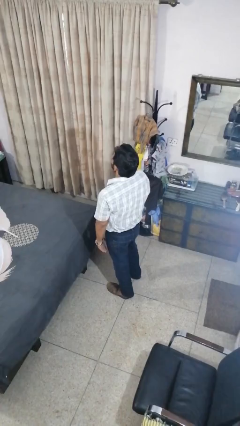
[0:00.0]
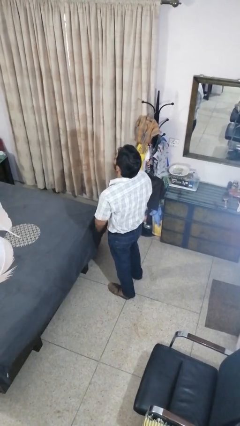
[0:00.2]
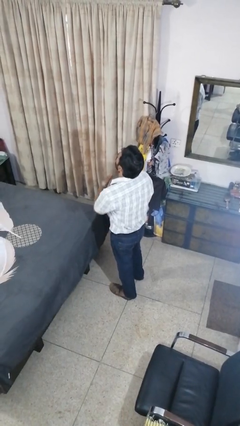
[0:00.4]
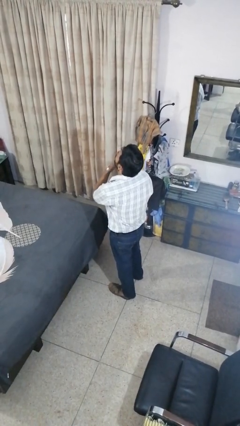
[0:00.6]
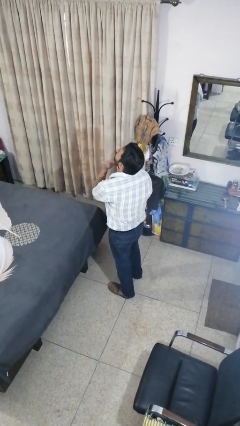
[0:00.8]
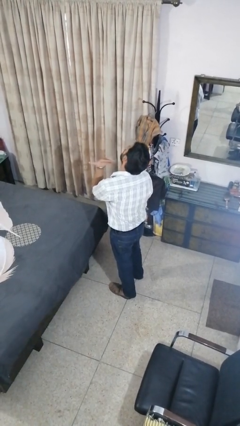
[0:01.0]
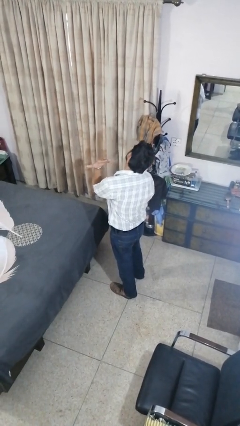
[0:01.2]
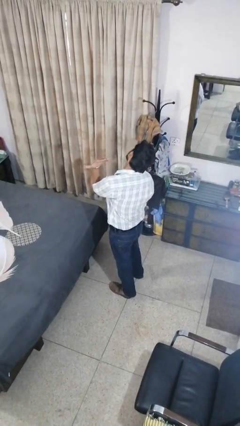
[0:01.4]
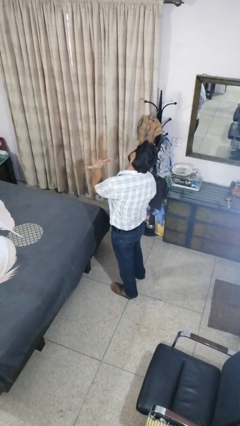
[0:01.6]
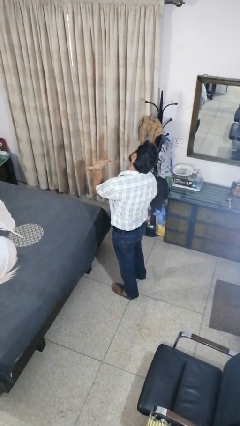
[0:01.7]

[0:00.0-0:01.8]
person gestures cut

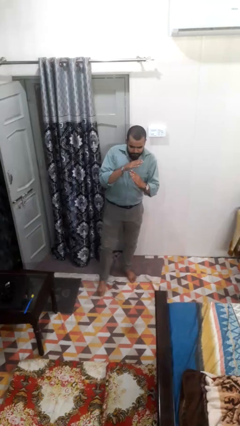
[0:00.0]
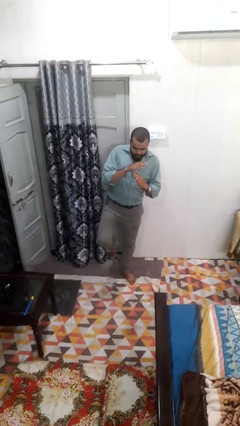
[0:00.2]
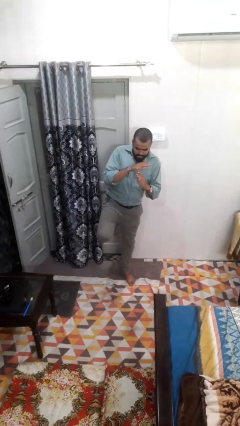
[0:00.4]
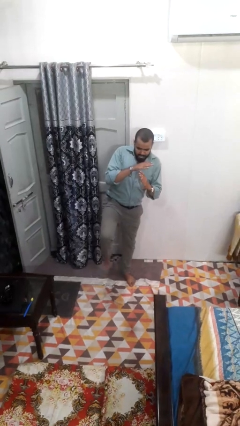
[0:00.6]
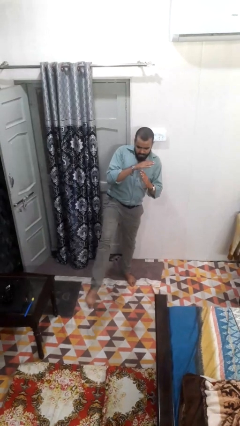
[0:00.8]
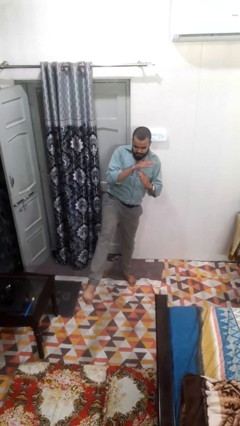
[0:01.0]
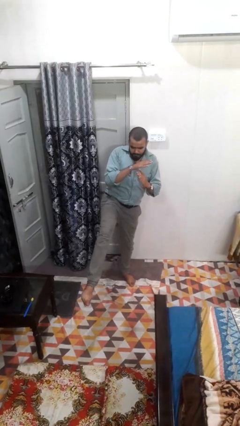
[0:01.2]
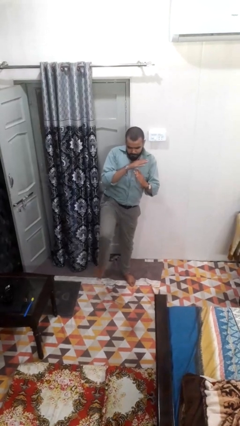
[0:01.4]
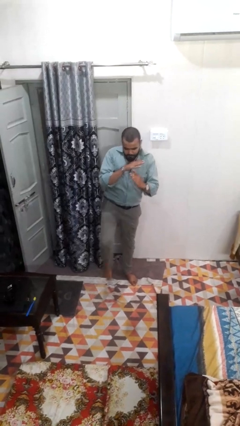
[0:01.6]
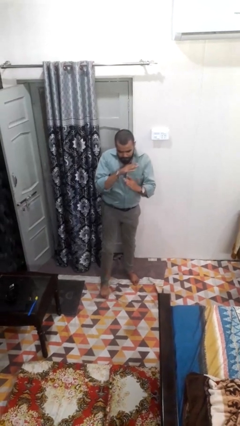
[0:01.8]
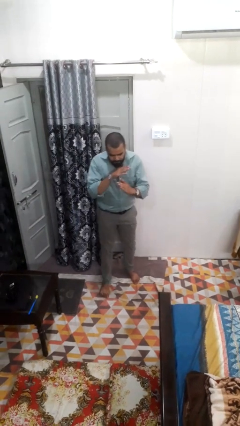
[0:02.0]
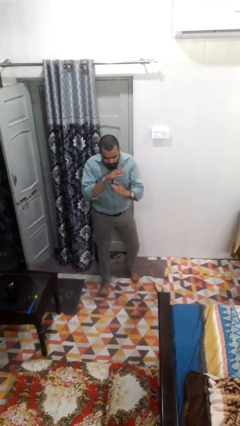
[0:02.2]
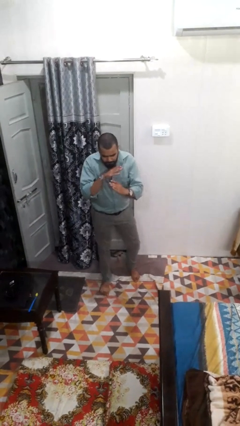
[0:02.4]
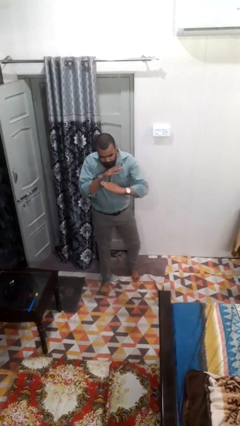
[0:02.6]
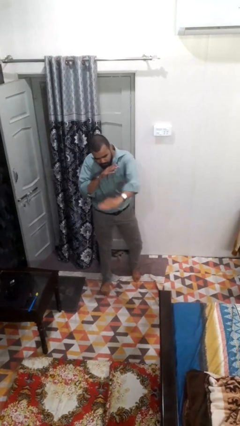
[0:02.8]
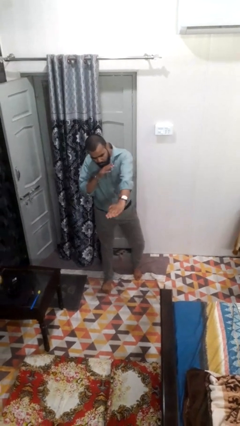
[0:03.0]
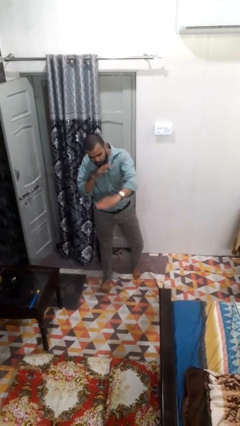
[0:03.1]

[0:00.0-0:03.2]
person karate kicks

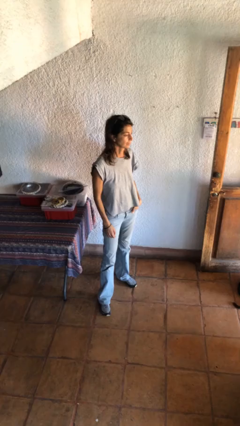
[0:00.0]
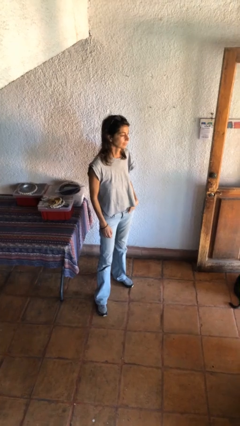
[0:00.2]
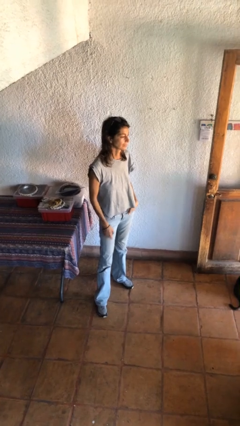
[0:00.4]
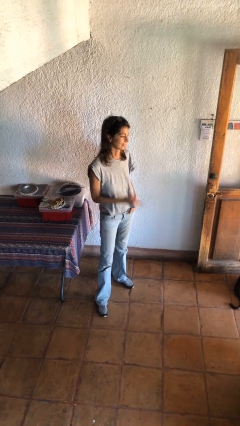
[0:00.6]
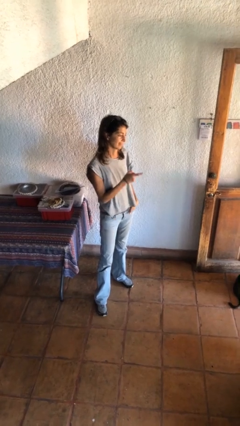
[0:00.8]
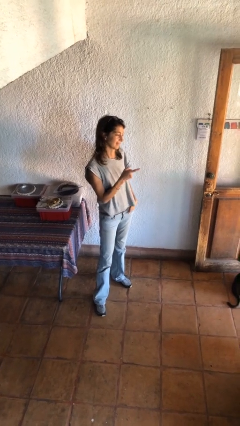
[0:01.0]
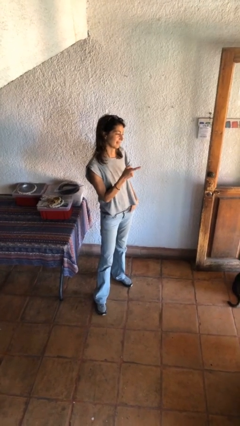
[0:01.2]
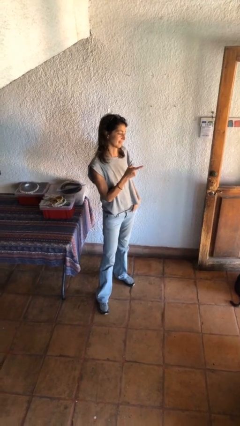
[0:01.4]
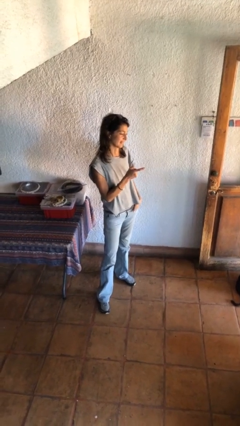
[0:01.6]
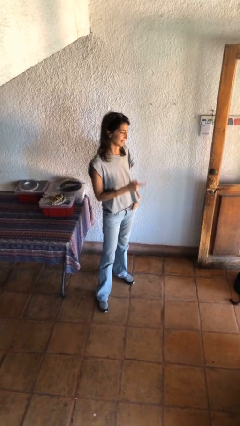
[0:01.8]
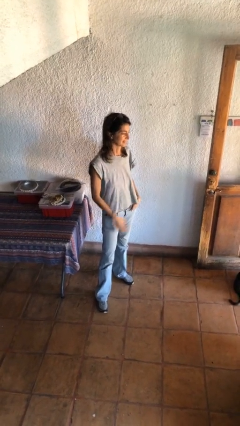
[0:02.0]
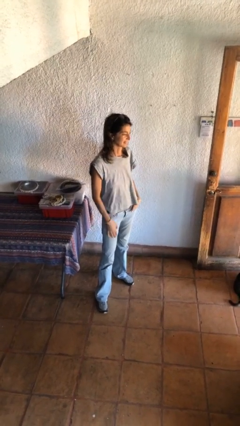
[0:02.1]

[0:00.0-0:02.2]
person points at person

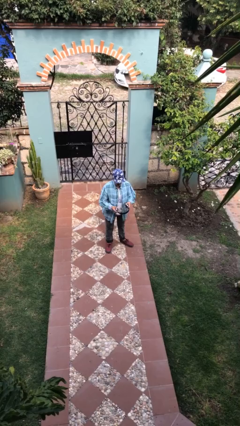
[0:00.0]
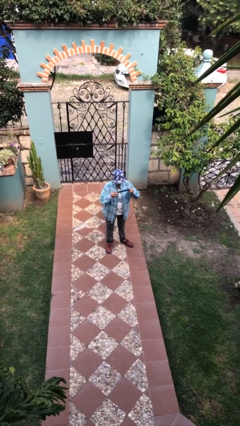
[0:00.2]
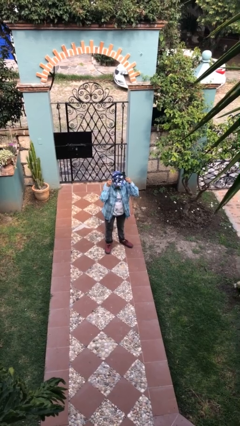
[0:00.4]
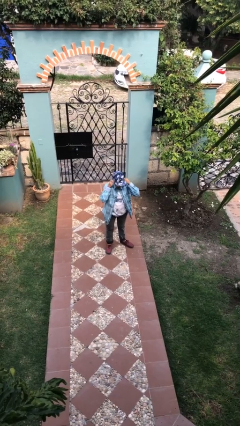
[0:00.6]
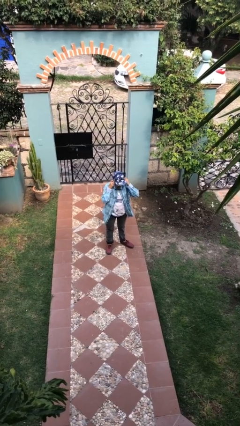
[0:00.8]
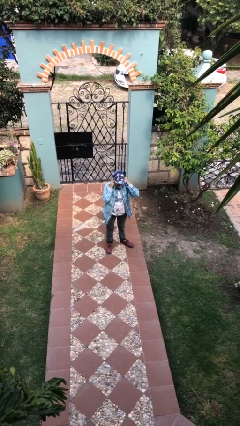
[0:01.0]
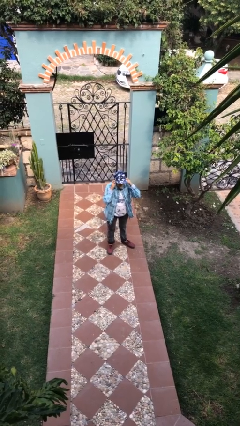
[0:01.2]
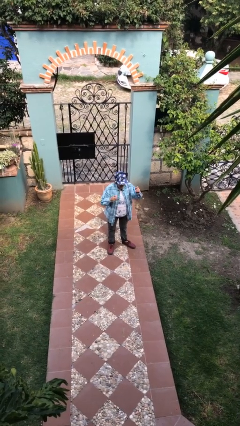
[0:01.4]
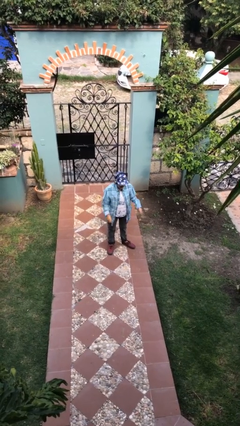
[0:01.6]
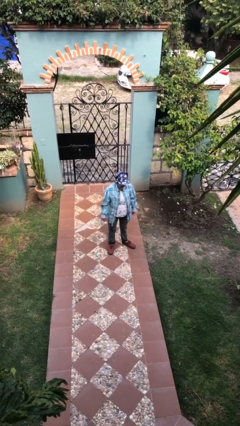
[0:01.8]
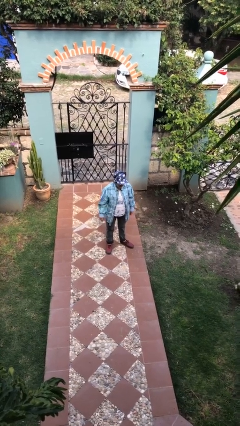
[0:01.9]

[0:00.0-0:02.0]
person puts on headphones

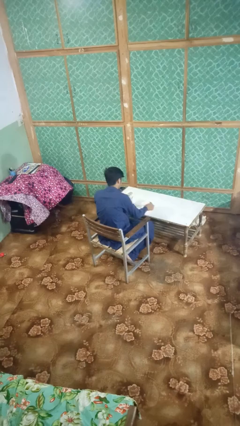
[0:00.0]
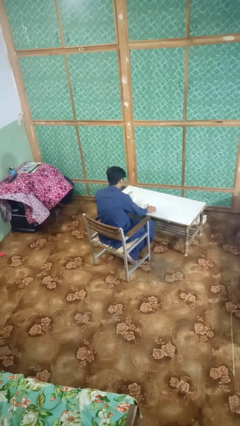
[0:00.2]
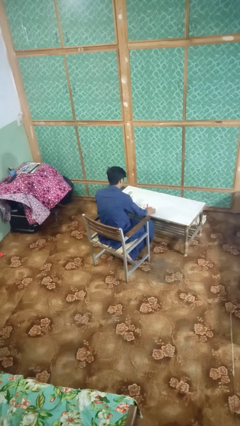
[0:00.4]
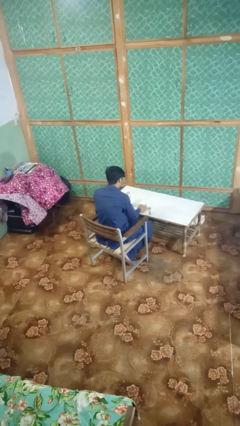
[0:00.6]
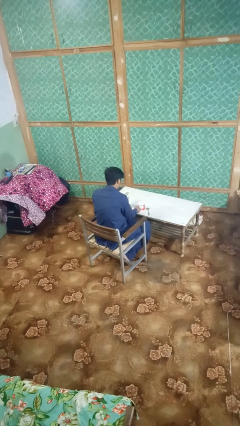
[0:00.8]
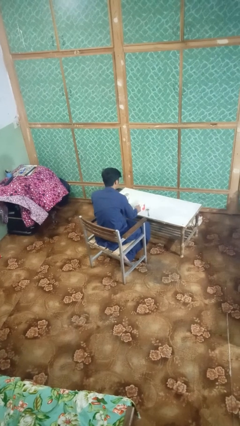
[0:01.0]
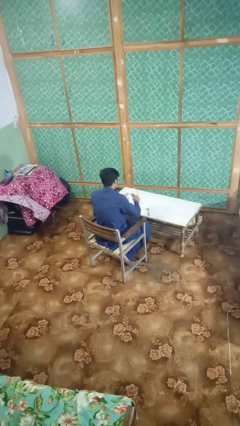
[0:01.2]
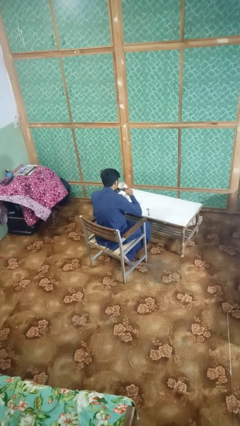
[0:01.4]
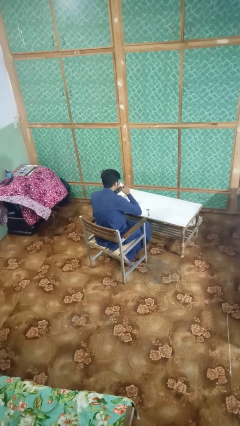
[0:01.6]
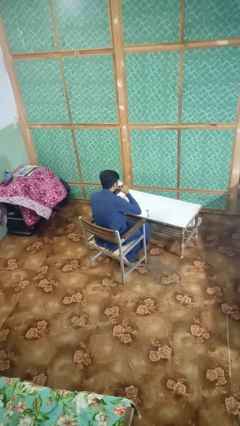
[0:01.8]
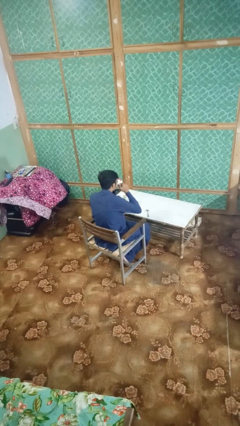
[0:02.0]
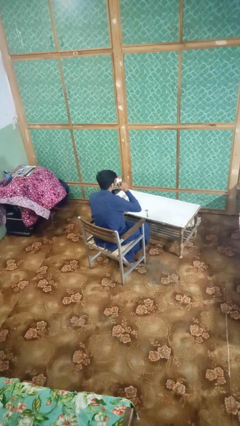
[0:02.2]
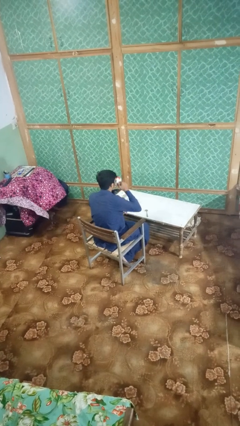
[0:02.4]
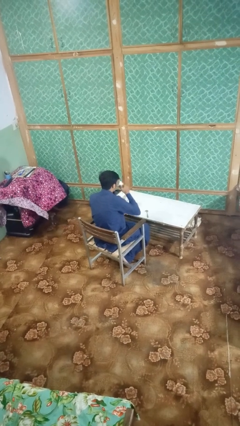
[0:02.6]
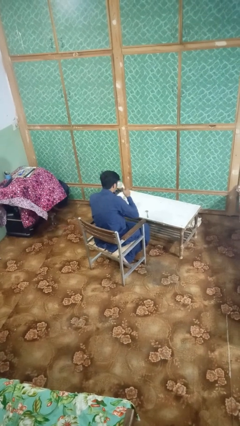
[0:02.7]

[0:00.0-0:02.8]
person drinks from mug

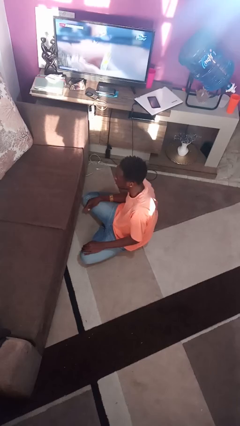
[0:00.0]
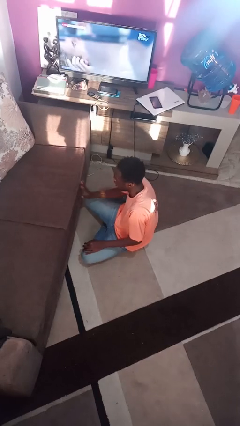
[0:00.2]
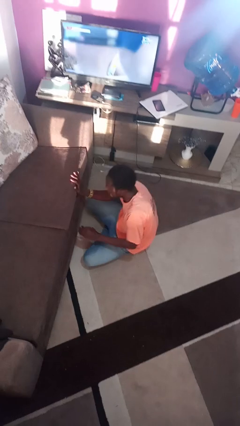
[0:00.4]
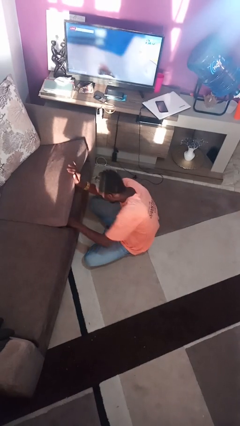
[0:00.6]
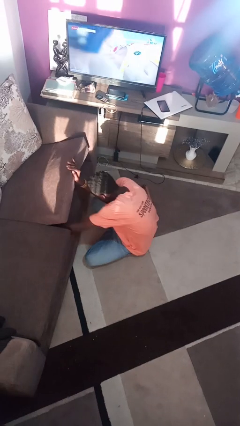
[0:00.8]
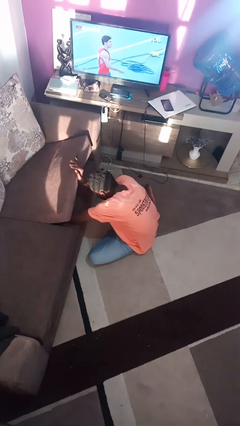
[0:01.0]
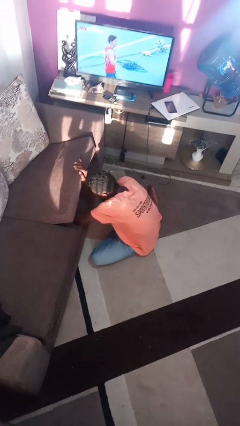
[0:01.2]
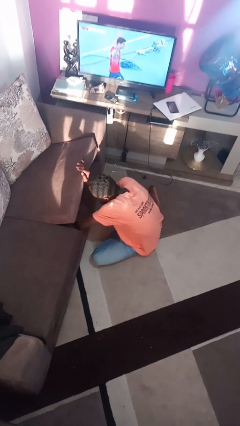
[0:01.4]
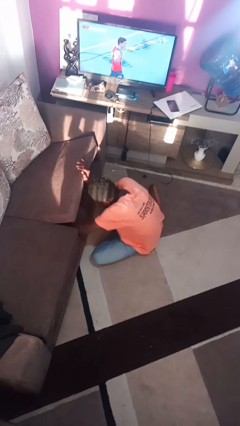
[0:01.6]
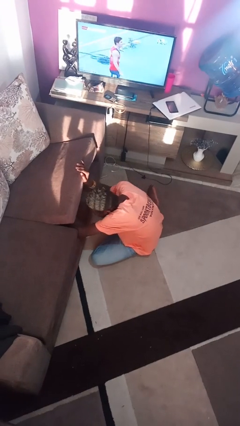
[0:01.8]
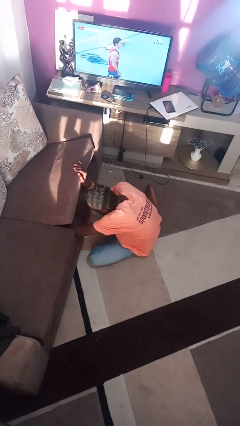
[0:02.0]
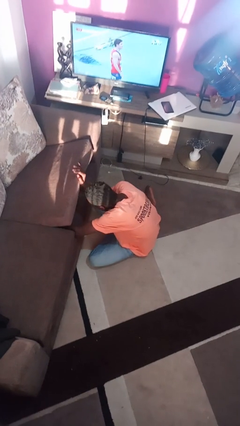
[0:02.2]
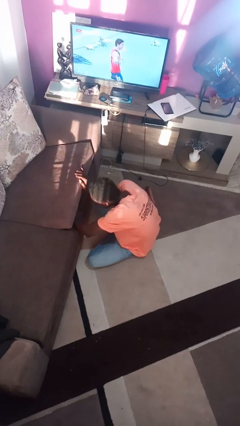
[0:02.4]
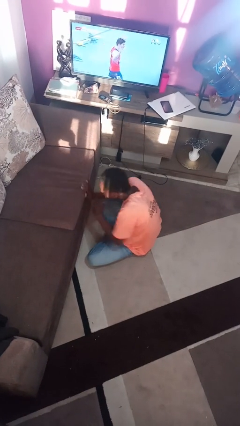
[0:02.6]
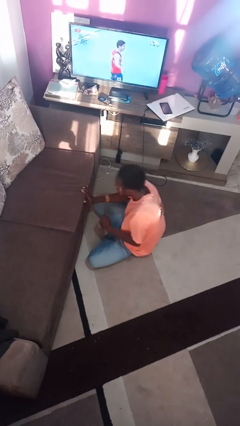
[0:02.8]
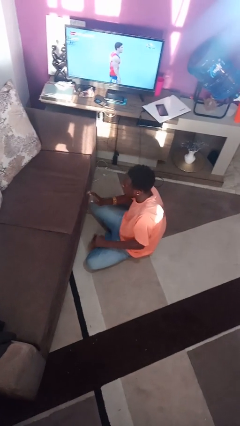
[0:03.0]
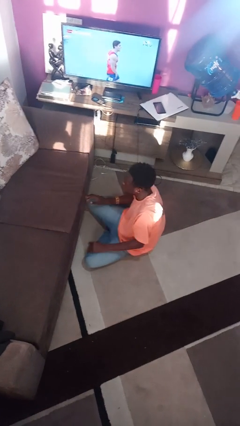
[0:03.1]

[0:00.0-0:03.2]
person searches under couch

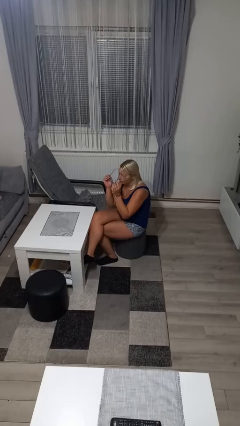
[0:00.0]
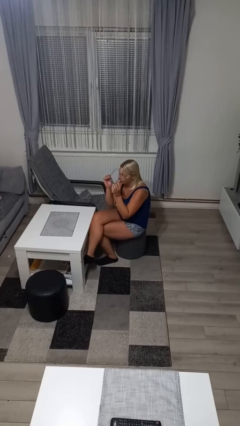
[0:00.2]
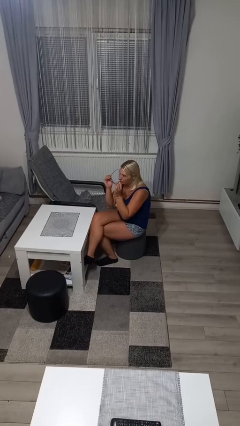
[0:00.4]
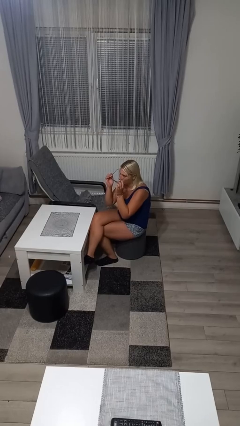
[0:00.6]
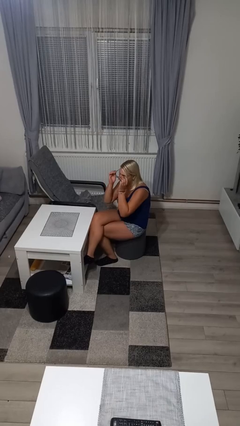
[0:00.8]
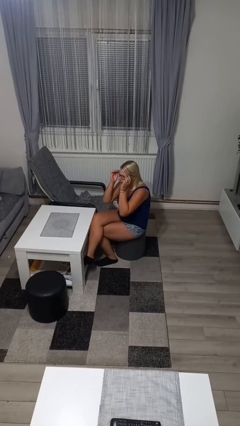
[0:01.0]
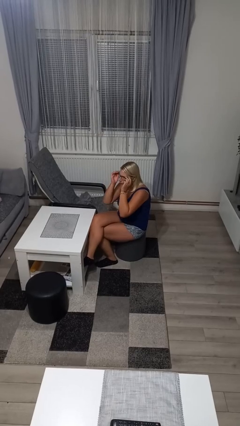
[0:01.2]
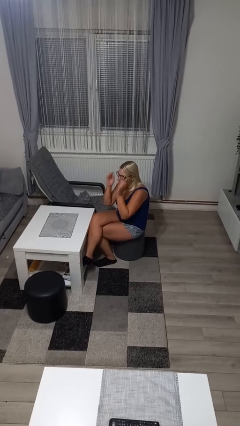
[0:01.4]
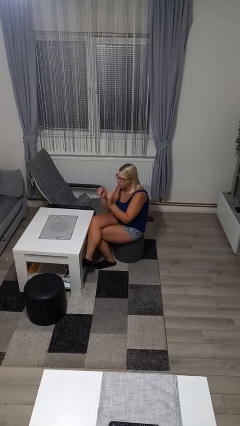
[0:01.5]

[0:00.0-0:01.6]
person puts on glasses

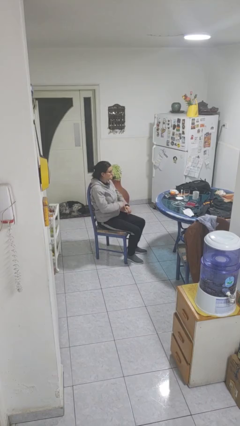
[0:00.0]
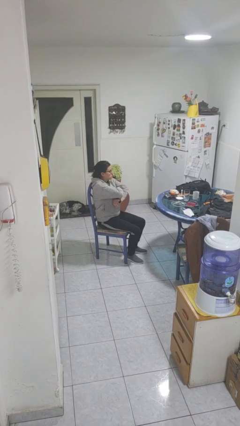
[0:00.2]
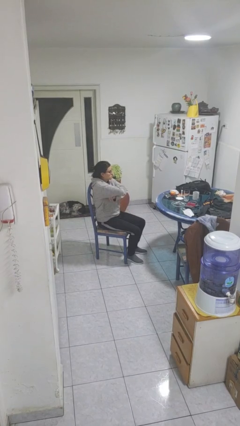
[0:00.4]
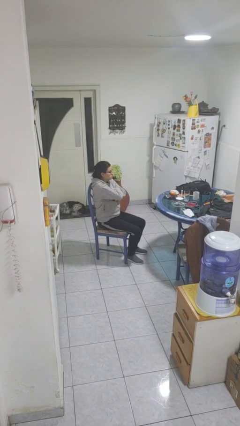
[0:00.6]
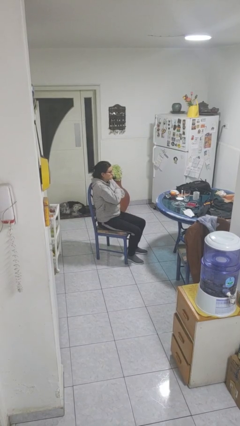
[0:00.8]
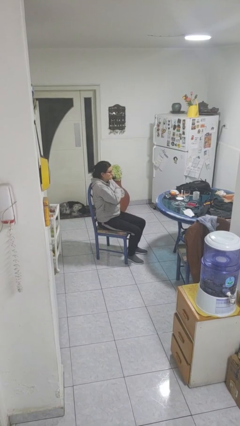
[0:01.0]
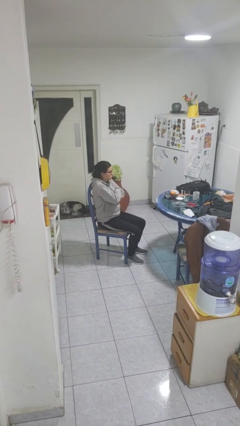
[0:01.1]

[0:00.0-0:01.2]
person crosses arms